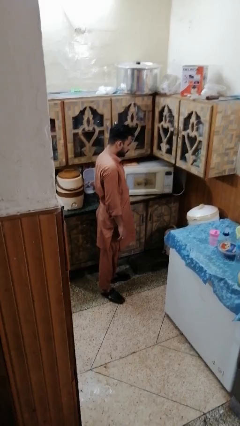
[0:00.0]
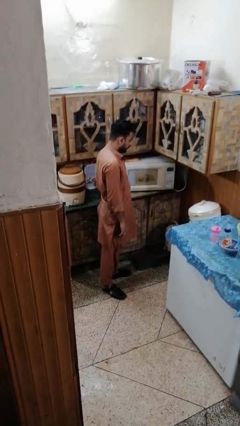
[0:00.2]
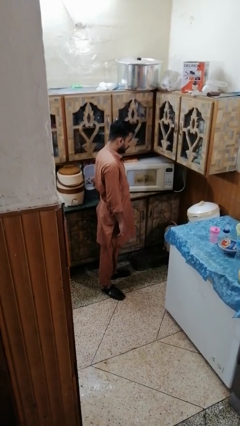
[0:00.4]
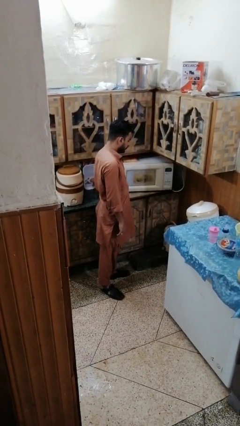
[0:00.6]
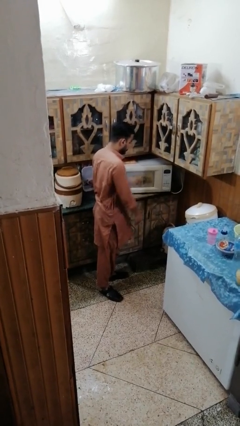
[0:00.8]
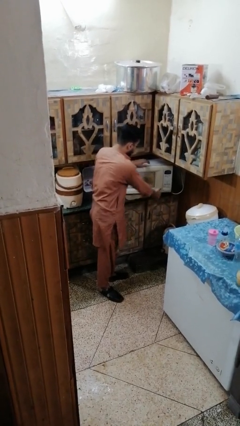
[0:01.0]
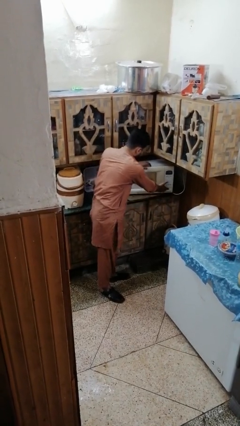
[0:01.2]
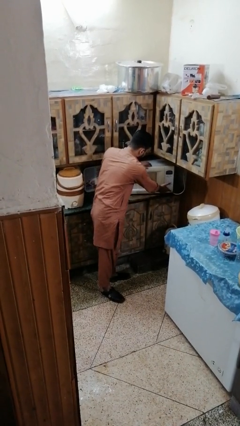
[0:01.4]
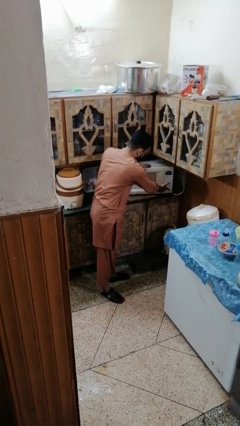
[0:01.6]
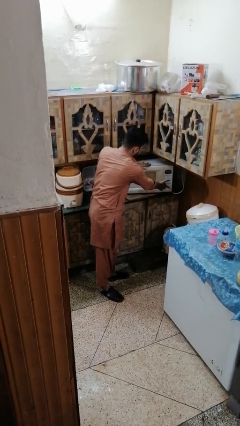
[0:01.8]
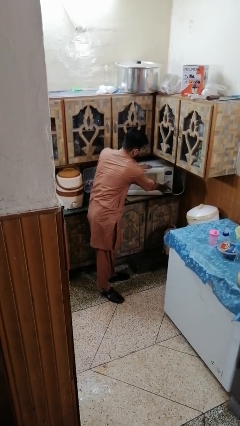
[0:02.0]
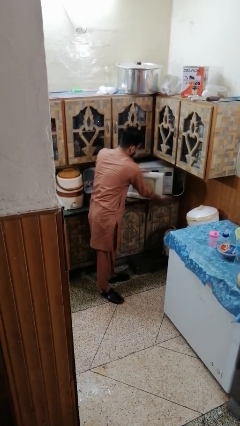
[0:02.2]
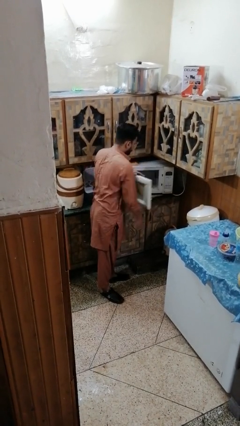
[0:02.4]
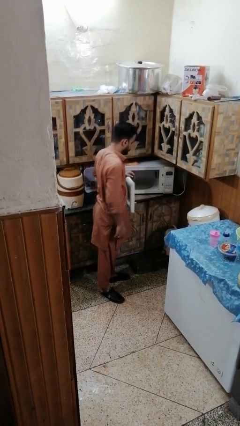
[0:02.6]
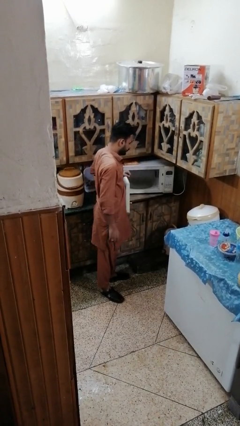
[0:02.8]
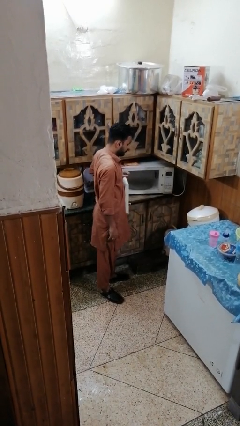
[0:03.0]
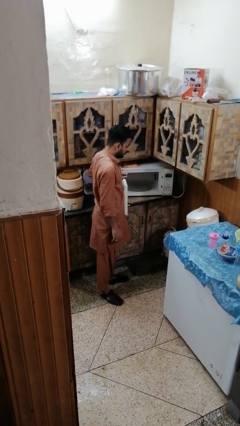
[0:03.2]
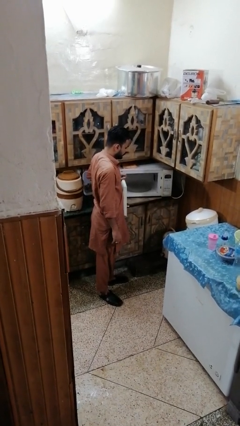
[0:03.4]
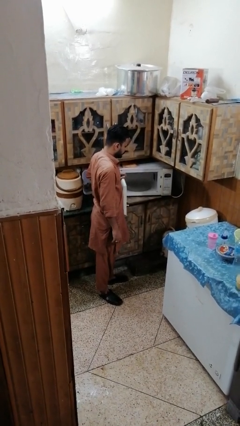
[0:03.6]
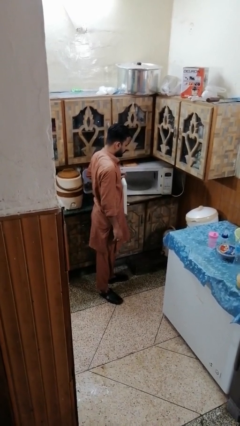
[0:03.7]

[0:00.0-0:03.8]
person opens microwave

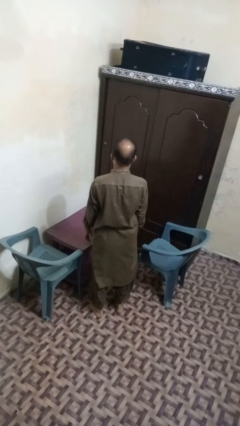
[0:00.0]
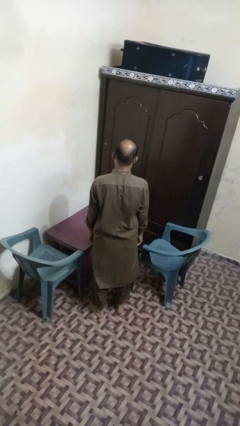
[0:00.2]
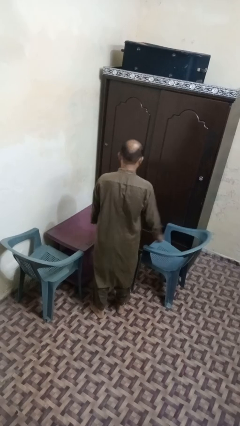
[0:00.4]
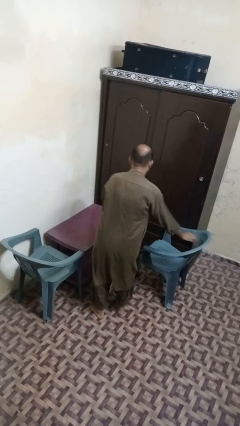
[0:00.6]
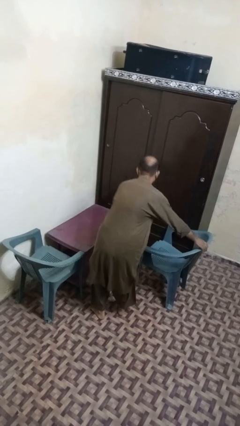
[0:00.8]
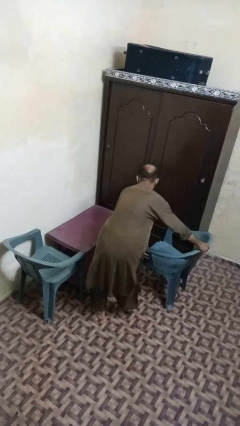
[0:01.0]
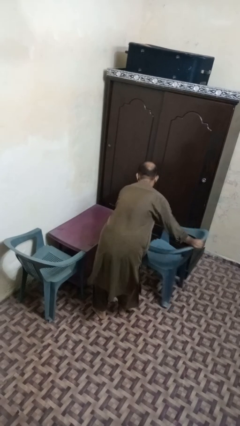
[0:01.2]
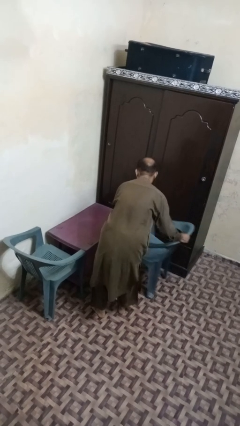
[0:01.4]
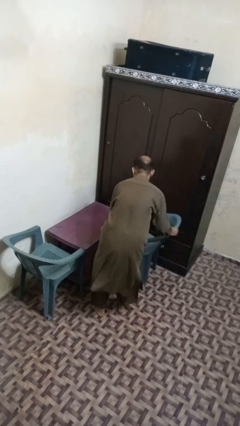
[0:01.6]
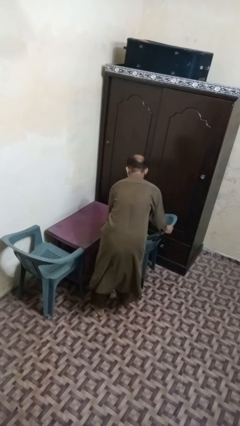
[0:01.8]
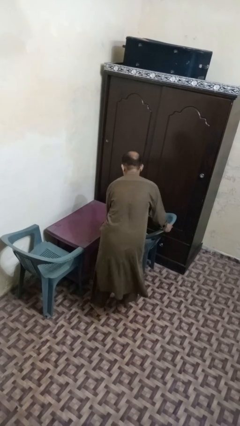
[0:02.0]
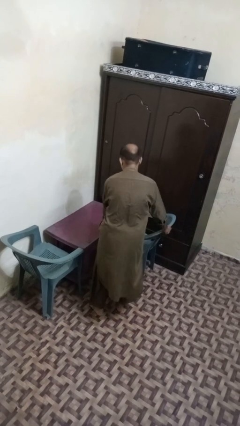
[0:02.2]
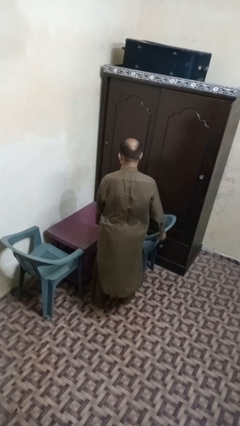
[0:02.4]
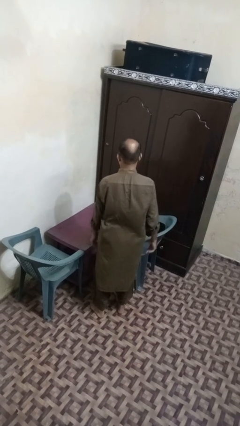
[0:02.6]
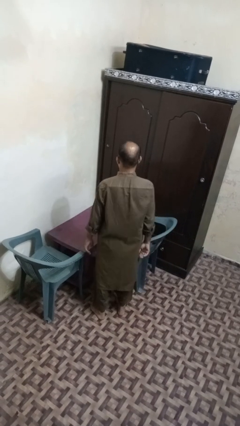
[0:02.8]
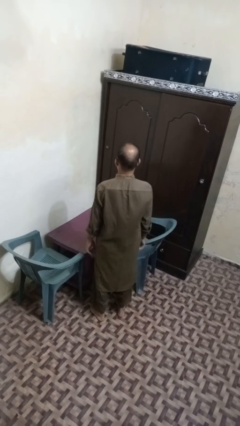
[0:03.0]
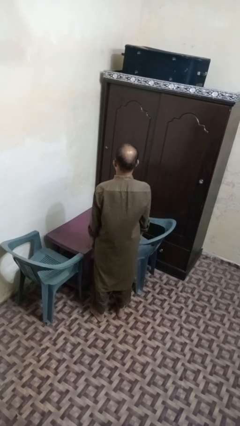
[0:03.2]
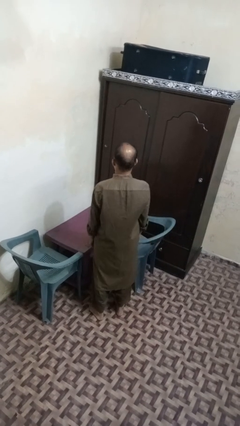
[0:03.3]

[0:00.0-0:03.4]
person pushes in chair

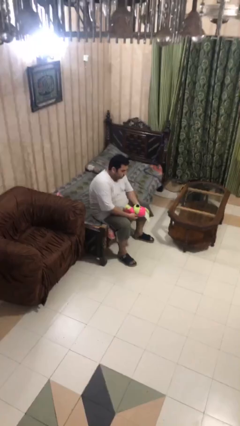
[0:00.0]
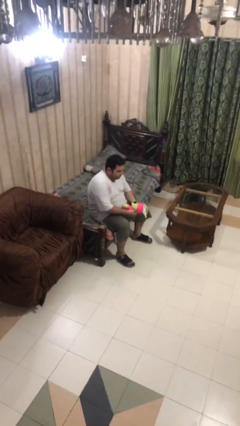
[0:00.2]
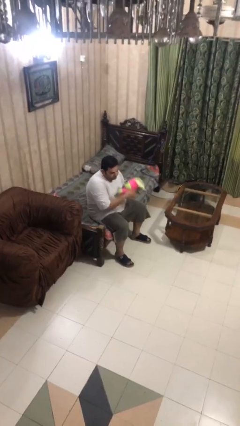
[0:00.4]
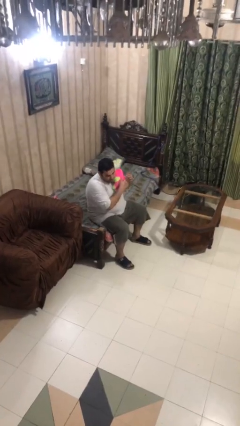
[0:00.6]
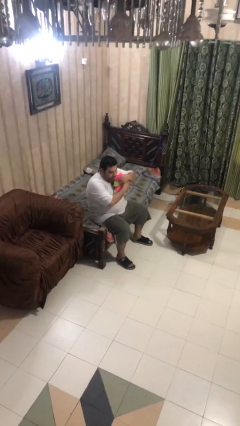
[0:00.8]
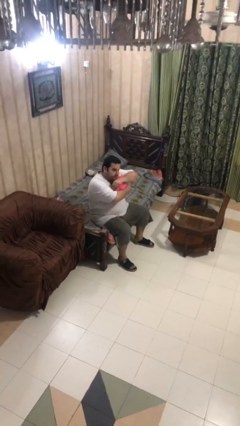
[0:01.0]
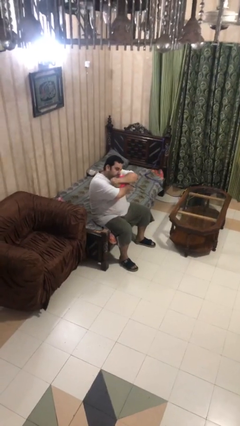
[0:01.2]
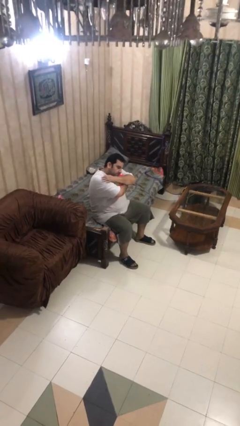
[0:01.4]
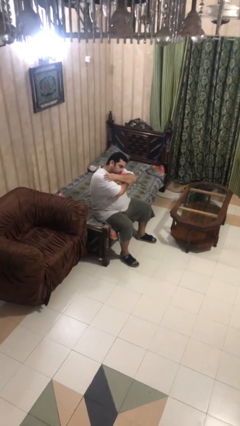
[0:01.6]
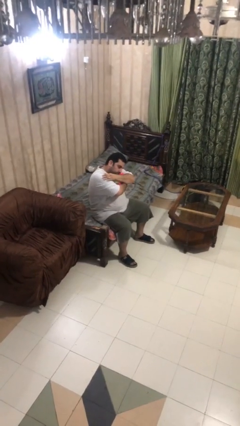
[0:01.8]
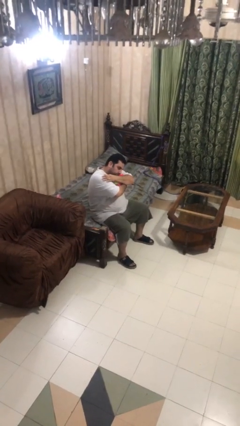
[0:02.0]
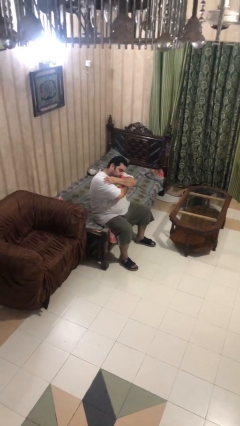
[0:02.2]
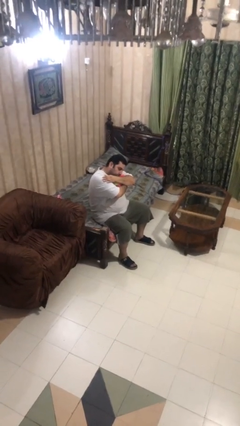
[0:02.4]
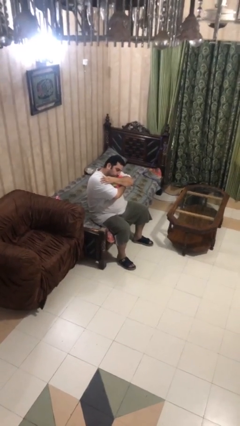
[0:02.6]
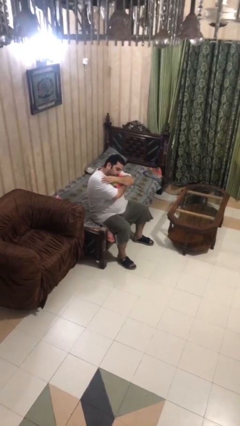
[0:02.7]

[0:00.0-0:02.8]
person hugs stuffed animal

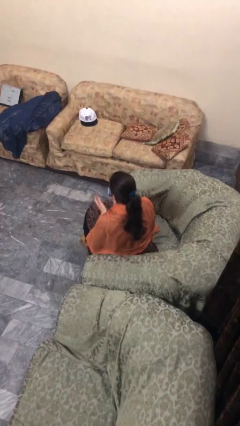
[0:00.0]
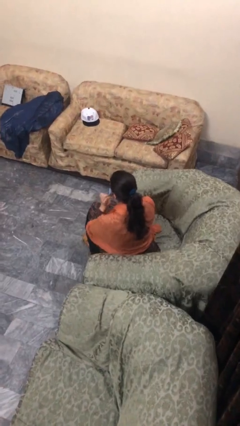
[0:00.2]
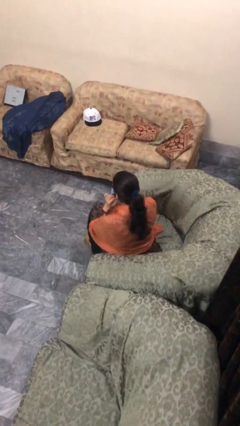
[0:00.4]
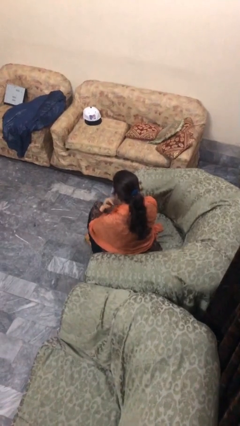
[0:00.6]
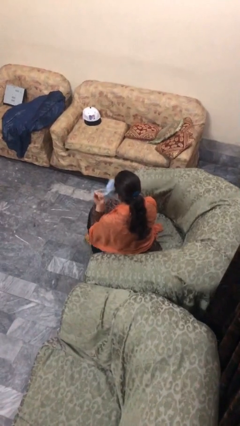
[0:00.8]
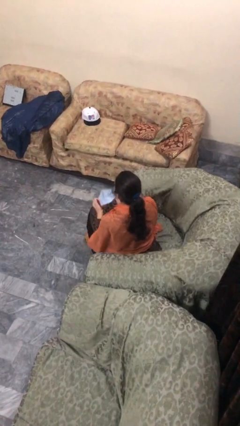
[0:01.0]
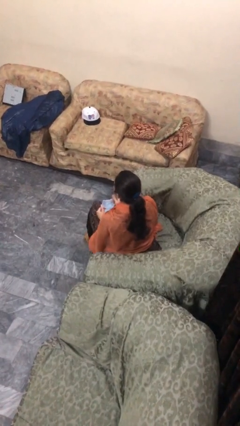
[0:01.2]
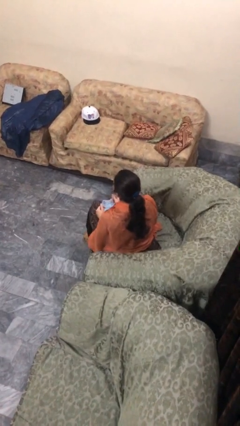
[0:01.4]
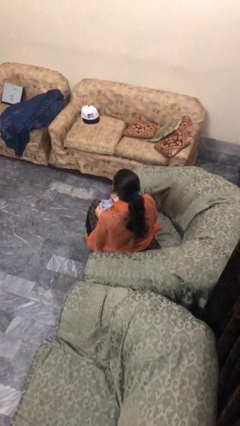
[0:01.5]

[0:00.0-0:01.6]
person takes off facemask

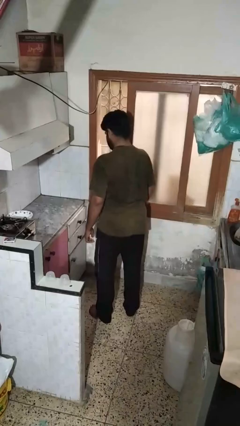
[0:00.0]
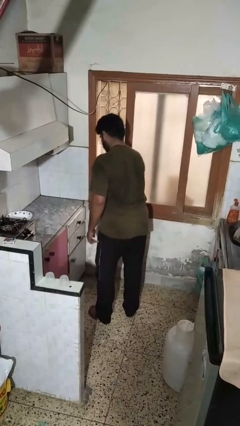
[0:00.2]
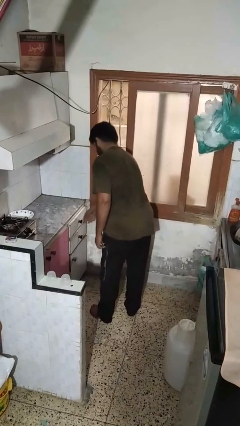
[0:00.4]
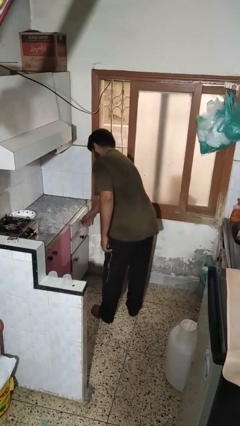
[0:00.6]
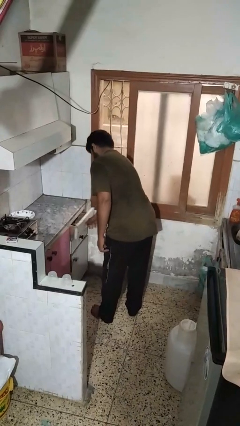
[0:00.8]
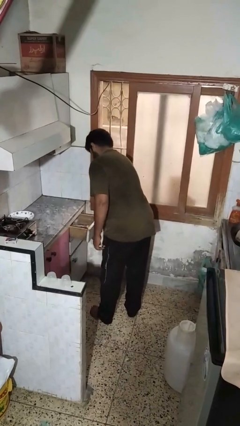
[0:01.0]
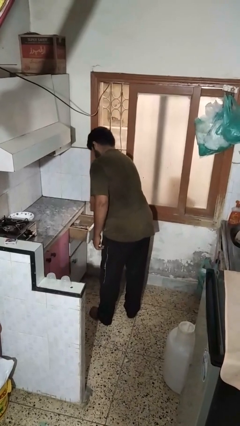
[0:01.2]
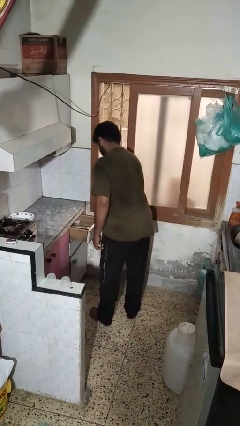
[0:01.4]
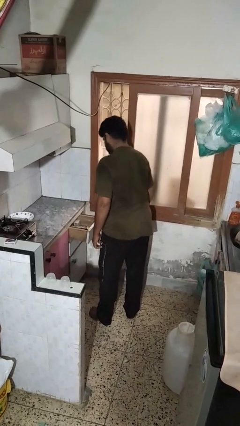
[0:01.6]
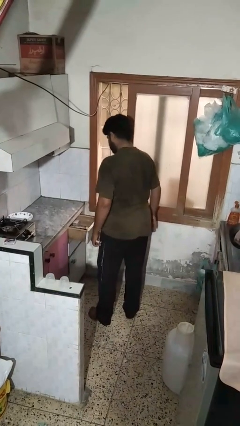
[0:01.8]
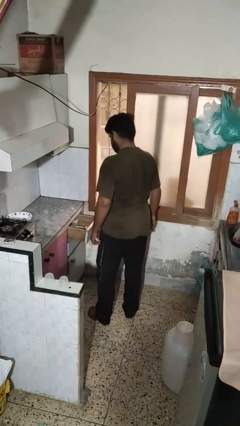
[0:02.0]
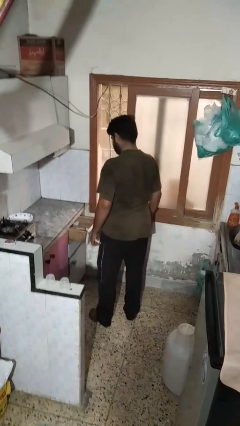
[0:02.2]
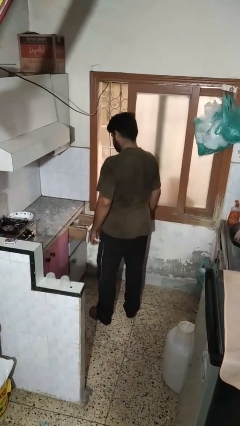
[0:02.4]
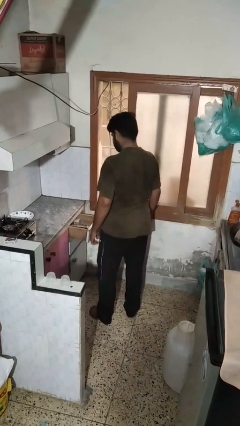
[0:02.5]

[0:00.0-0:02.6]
person opens kitchen drawer

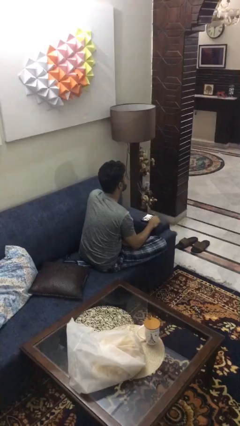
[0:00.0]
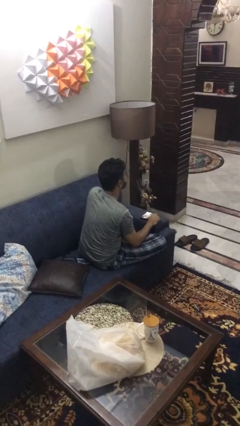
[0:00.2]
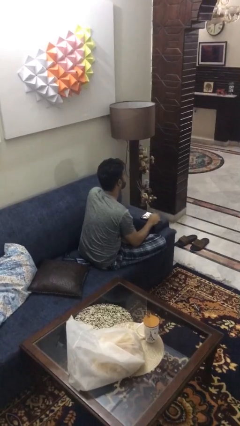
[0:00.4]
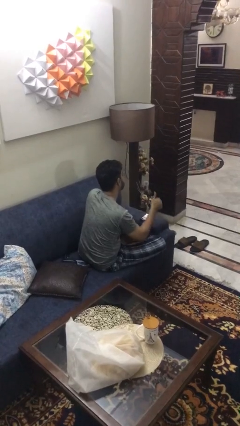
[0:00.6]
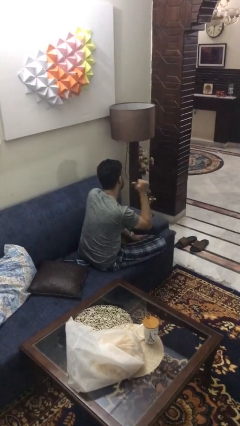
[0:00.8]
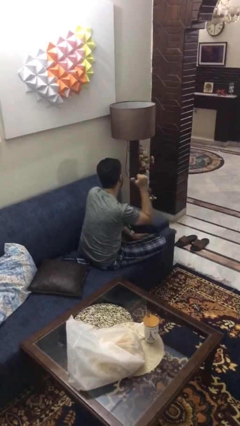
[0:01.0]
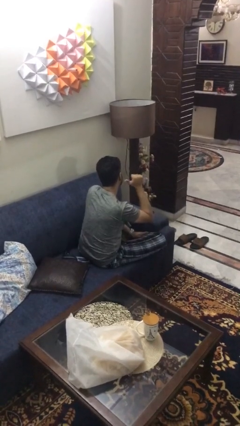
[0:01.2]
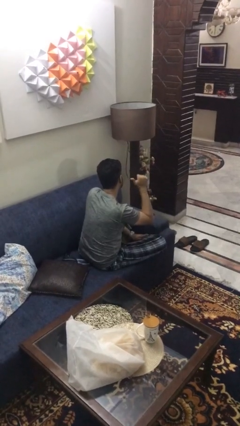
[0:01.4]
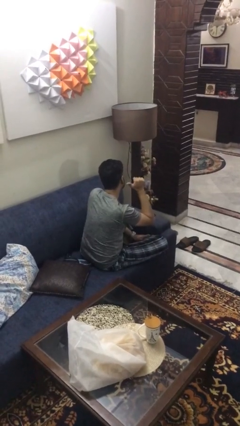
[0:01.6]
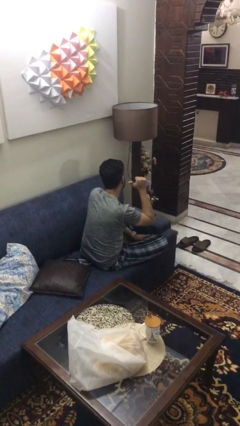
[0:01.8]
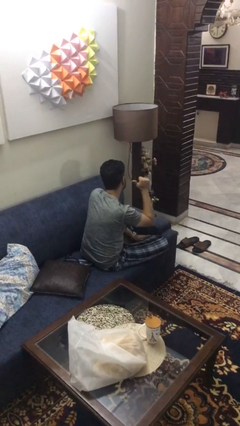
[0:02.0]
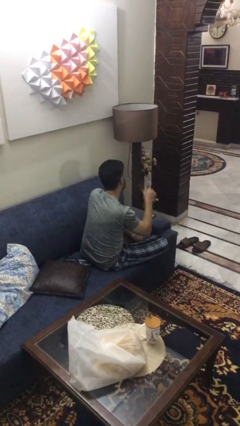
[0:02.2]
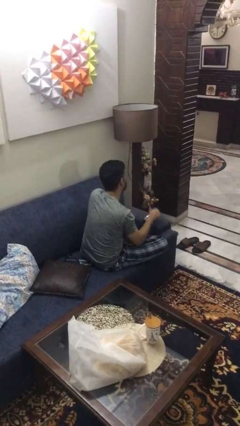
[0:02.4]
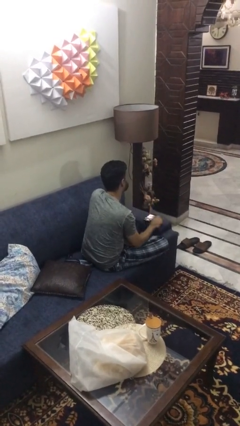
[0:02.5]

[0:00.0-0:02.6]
person gestures behind me
